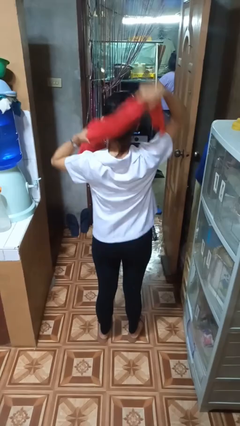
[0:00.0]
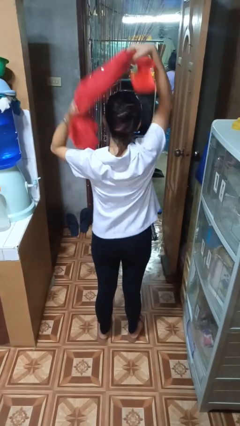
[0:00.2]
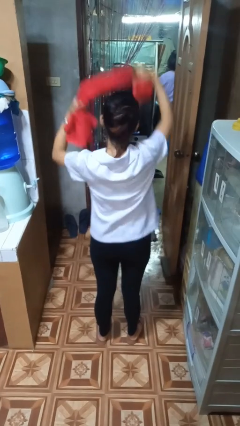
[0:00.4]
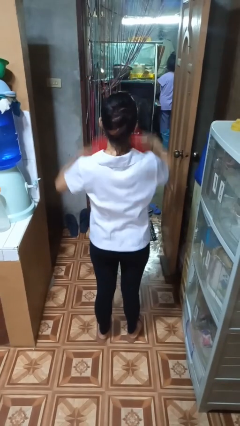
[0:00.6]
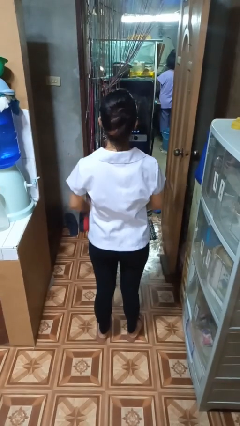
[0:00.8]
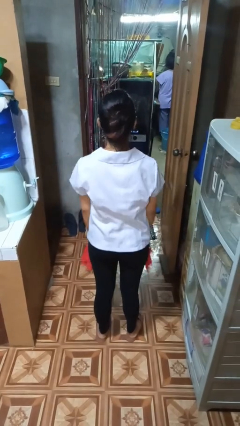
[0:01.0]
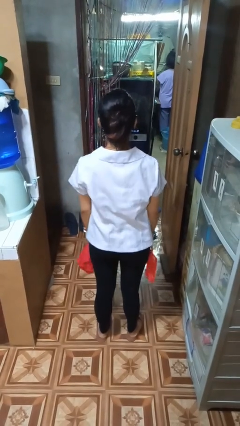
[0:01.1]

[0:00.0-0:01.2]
person takes off scarf

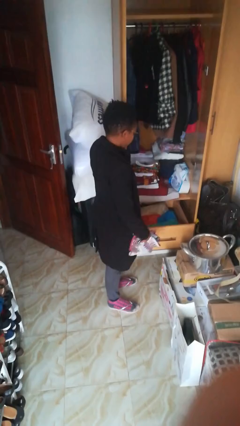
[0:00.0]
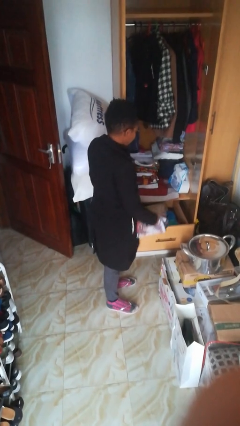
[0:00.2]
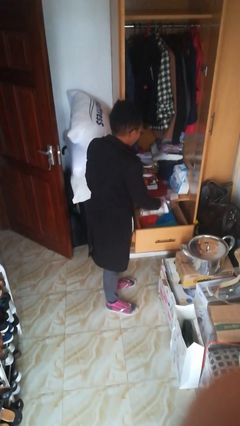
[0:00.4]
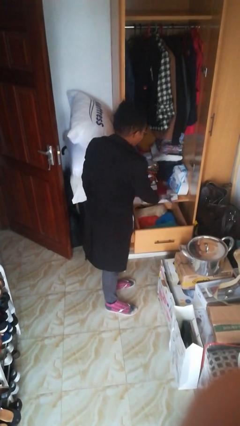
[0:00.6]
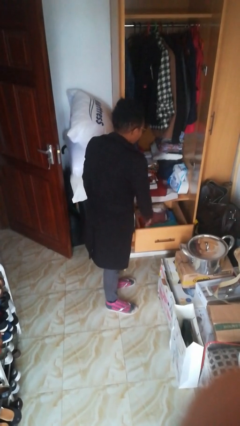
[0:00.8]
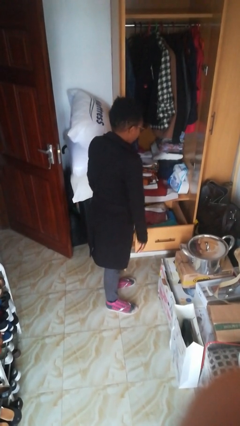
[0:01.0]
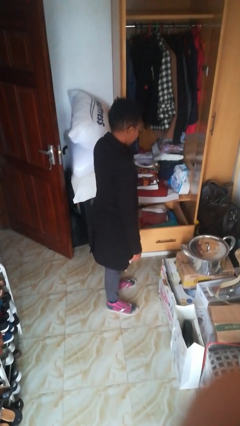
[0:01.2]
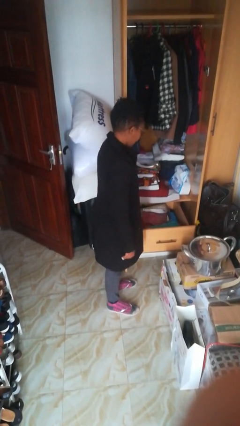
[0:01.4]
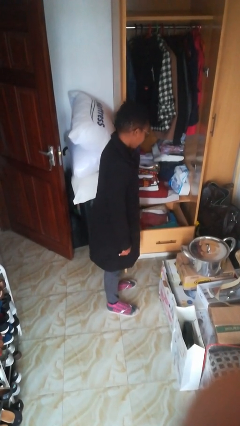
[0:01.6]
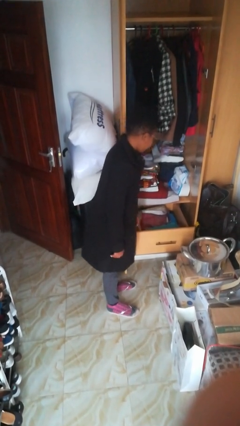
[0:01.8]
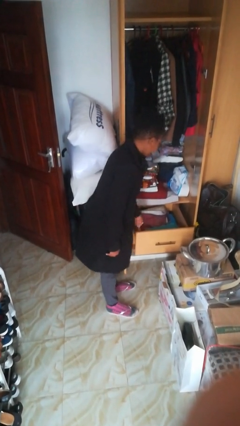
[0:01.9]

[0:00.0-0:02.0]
person puts clothes into dresser

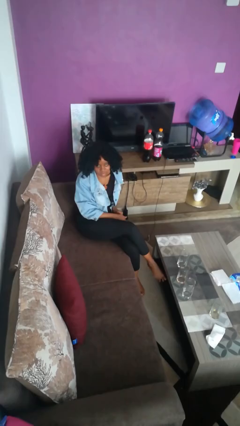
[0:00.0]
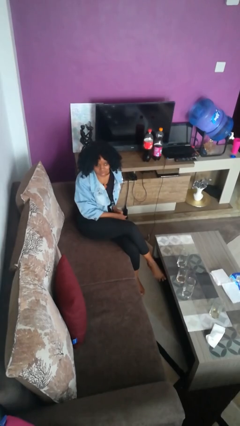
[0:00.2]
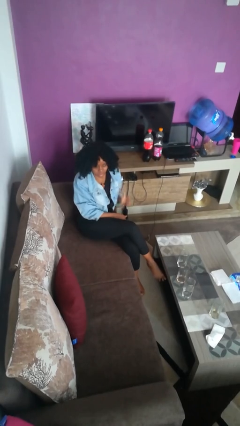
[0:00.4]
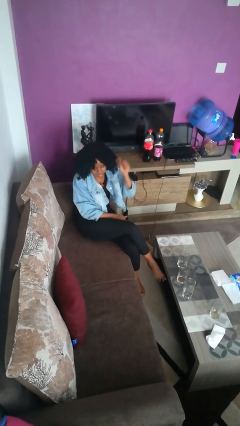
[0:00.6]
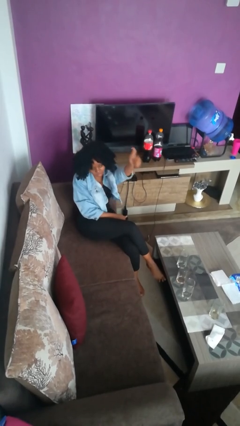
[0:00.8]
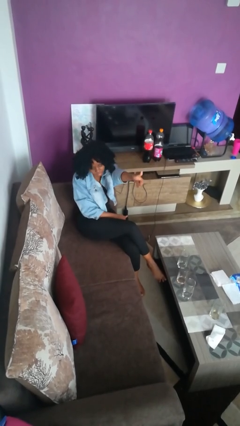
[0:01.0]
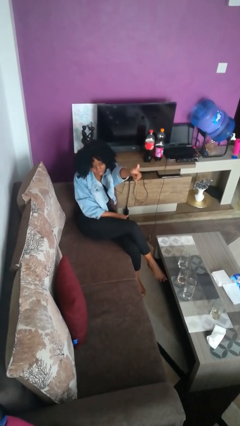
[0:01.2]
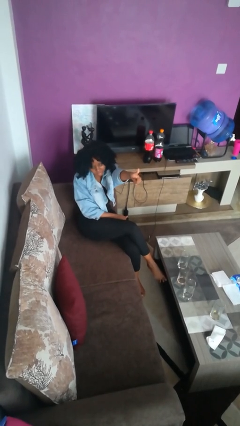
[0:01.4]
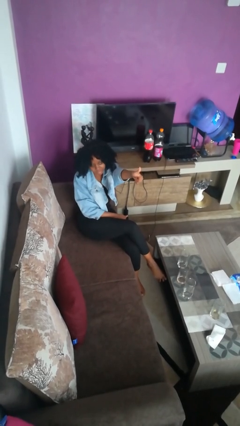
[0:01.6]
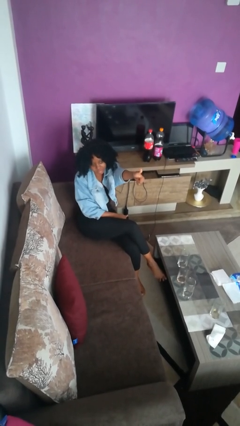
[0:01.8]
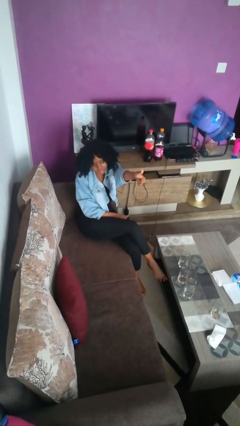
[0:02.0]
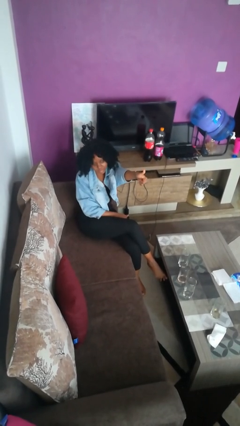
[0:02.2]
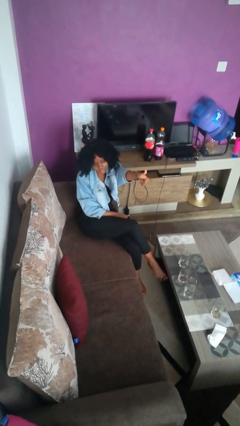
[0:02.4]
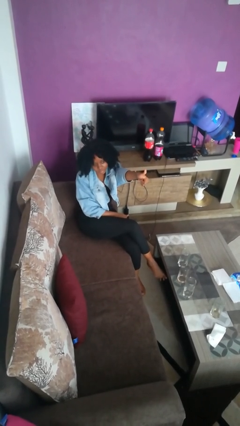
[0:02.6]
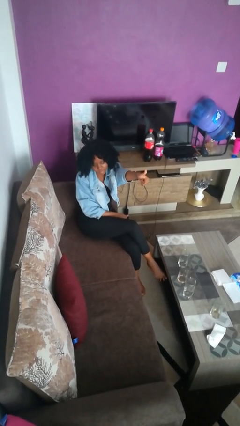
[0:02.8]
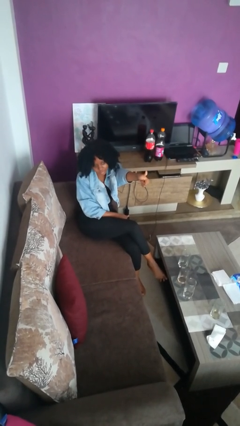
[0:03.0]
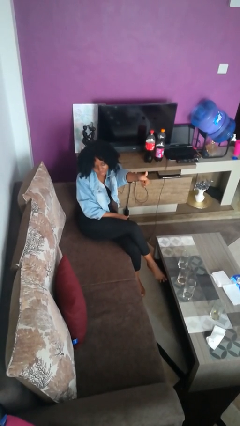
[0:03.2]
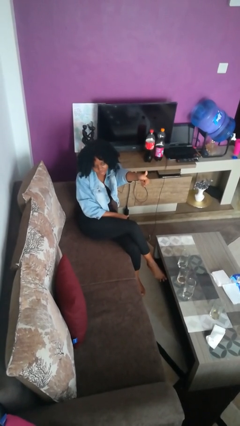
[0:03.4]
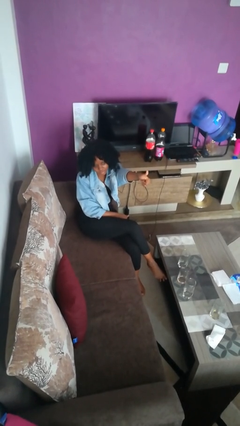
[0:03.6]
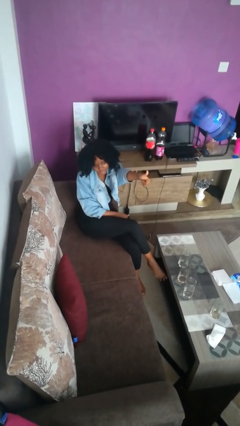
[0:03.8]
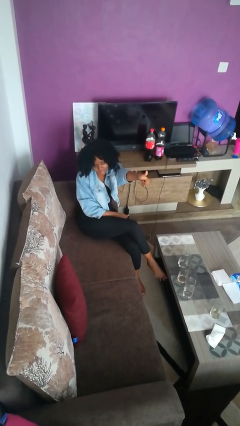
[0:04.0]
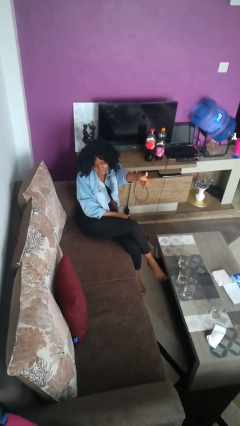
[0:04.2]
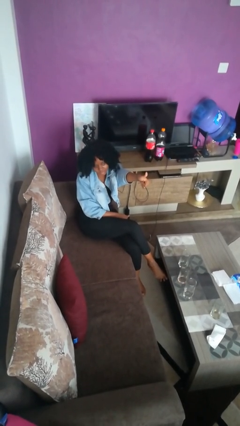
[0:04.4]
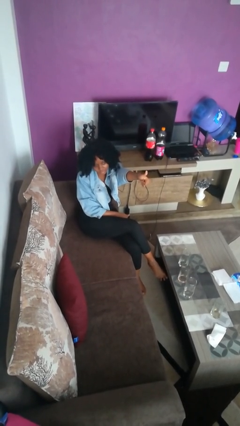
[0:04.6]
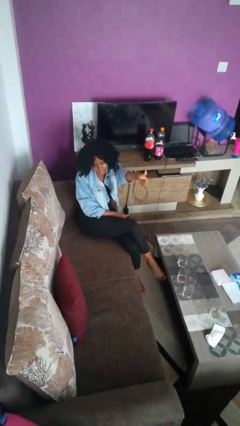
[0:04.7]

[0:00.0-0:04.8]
person gestures thumbs up

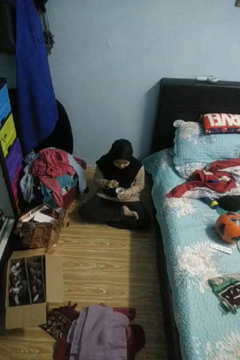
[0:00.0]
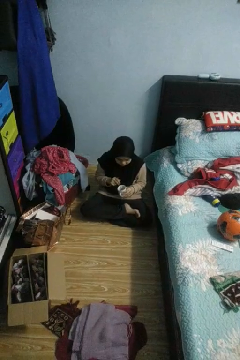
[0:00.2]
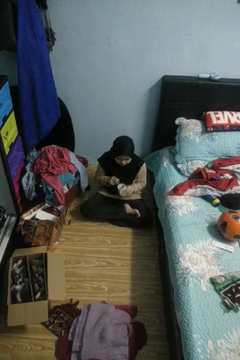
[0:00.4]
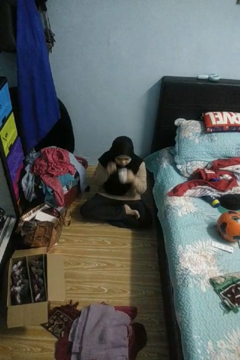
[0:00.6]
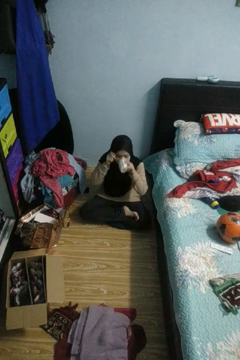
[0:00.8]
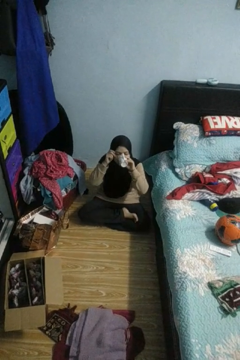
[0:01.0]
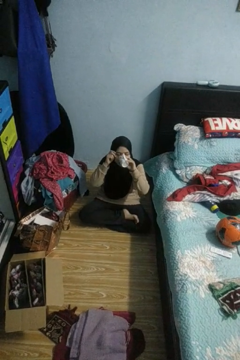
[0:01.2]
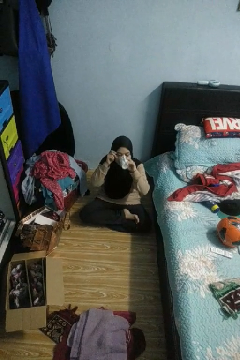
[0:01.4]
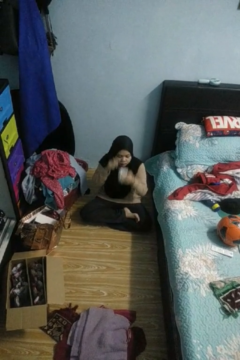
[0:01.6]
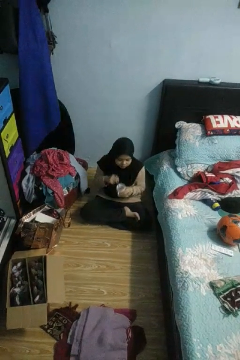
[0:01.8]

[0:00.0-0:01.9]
person drinks from mug

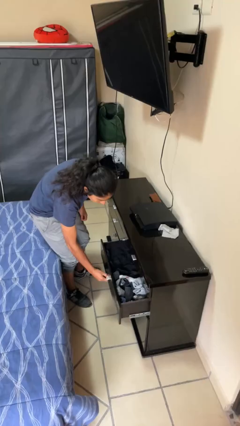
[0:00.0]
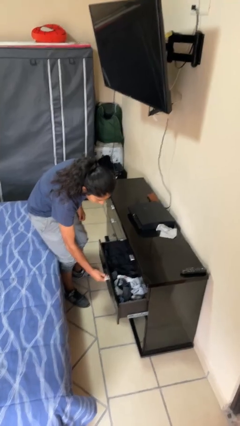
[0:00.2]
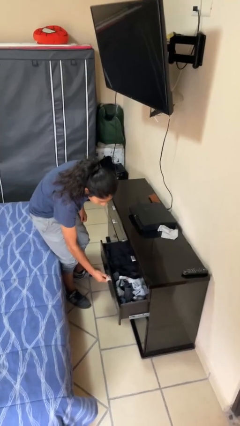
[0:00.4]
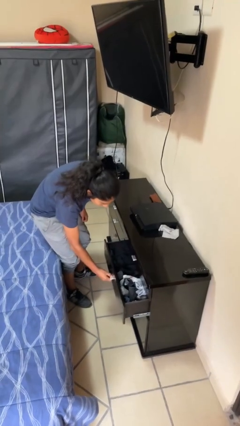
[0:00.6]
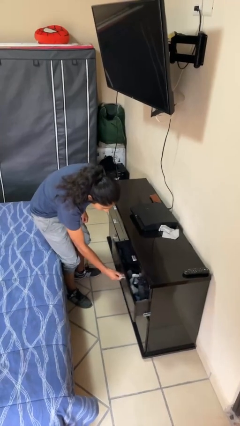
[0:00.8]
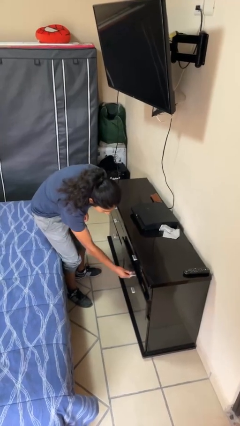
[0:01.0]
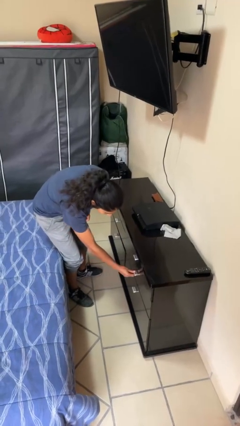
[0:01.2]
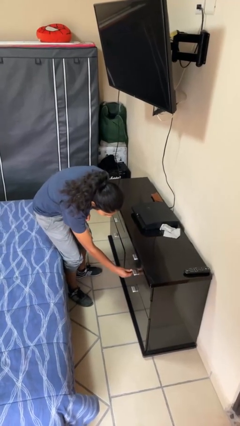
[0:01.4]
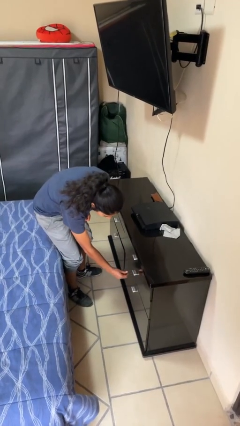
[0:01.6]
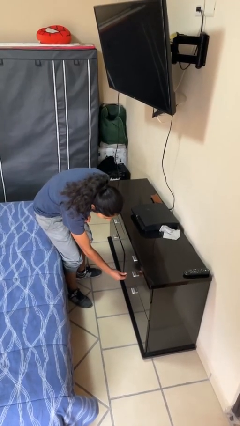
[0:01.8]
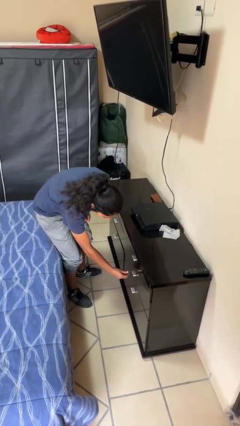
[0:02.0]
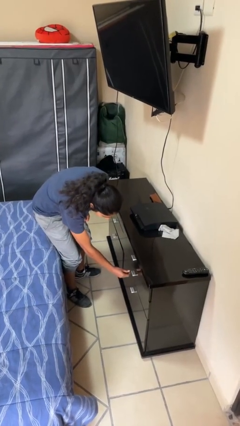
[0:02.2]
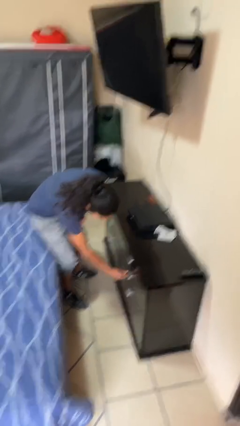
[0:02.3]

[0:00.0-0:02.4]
person closes dresser drawer

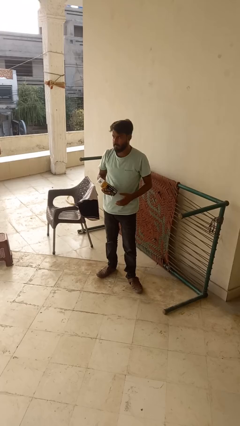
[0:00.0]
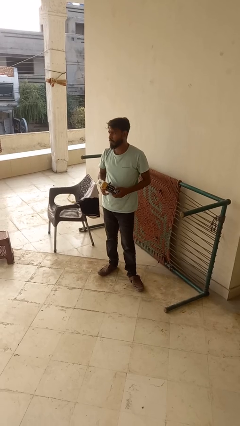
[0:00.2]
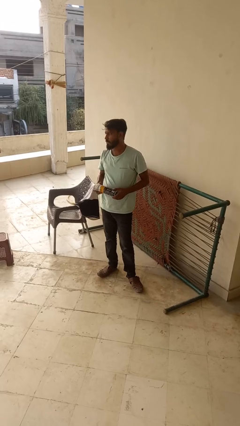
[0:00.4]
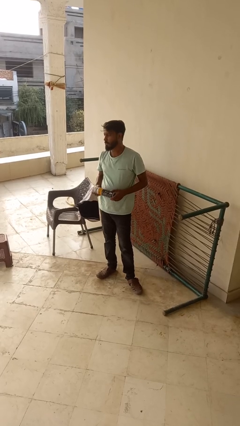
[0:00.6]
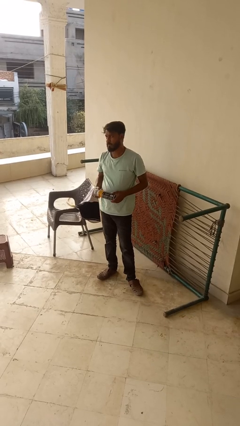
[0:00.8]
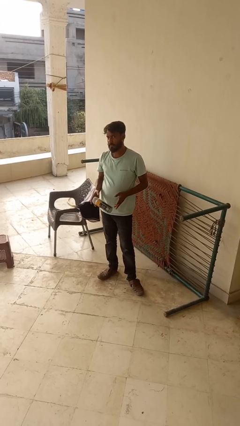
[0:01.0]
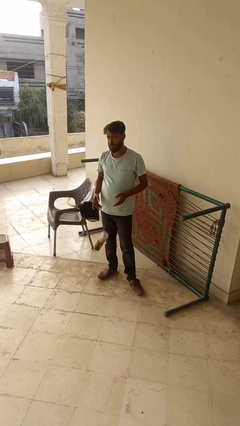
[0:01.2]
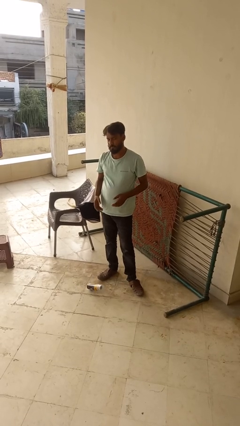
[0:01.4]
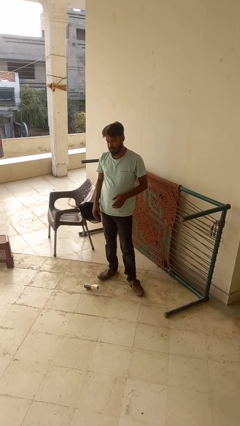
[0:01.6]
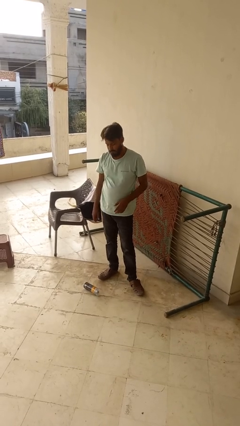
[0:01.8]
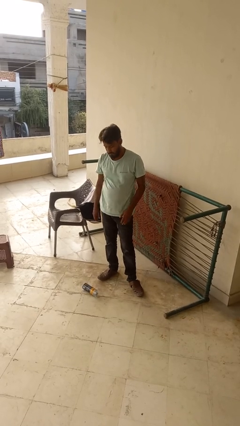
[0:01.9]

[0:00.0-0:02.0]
person drops object

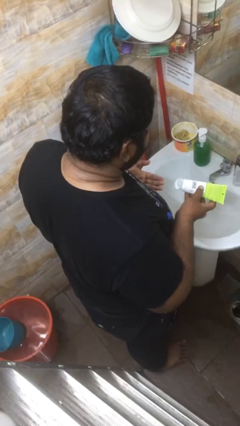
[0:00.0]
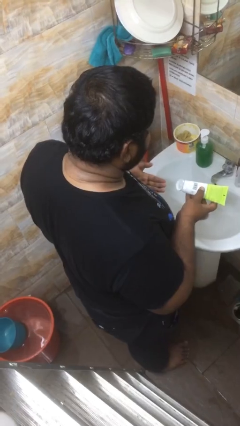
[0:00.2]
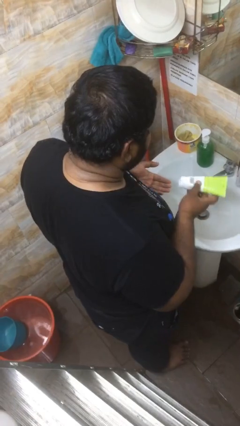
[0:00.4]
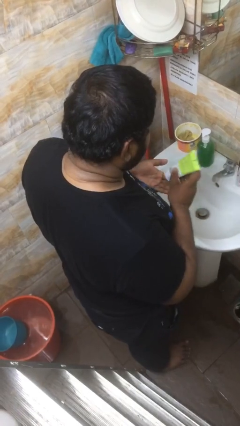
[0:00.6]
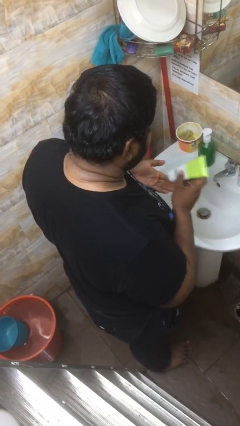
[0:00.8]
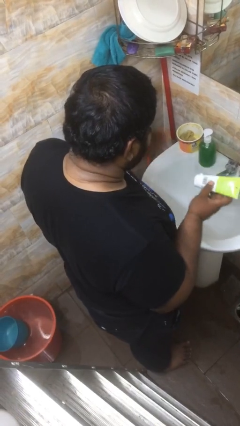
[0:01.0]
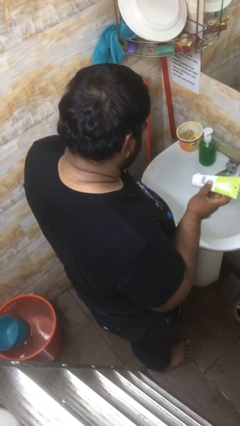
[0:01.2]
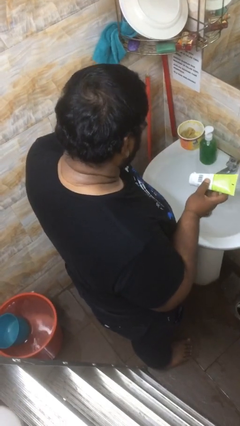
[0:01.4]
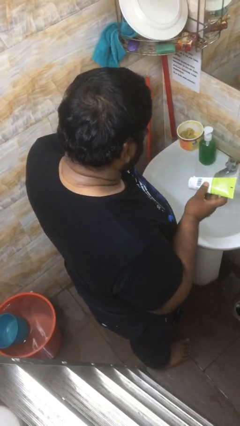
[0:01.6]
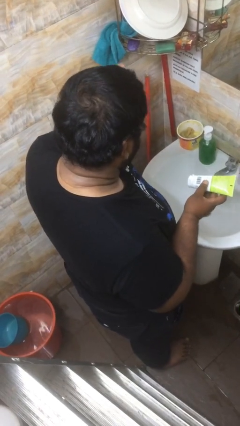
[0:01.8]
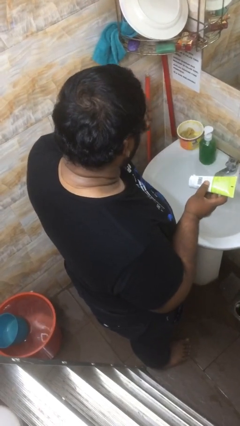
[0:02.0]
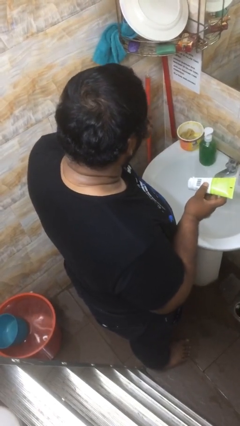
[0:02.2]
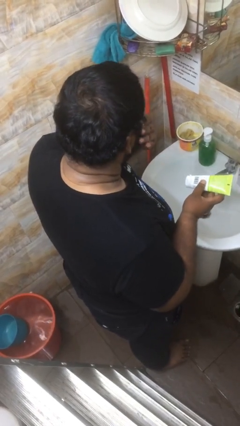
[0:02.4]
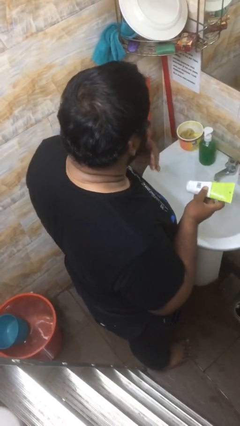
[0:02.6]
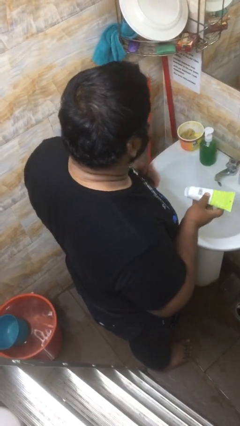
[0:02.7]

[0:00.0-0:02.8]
person applies facial moisturizer

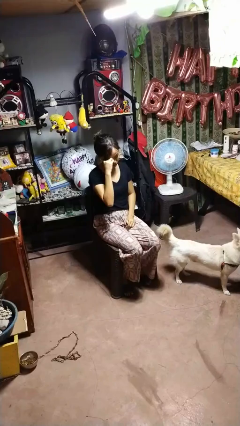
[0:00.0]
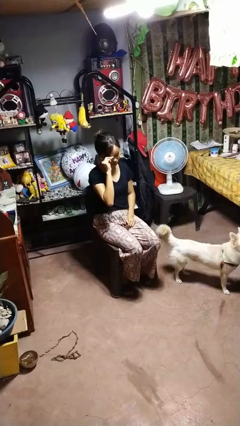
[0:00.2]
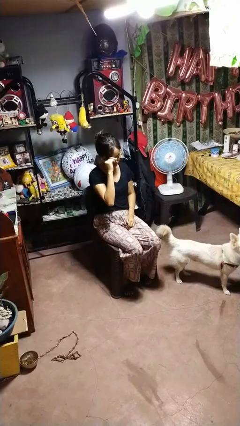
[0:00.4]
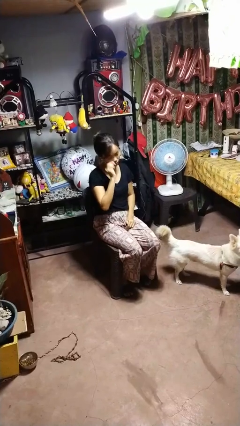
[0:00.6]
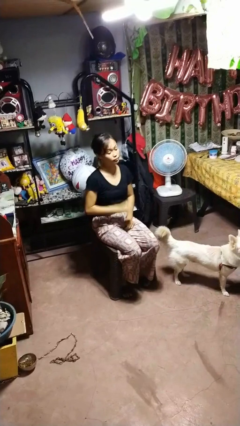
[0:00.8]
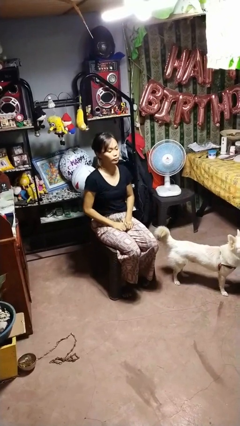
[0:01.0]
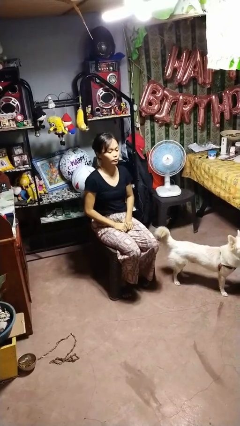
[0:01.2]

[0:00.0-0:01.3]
person rubs eyes
